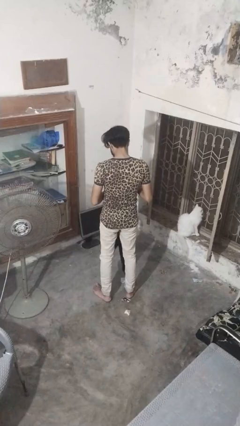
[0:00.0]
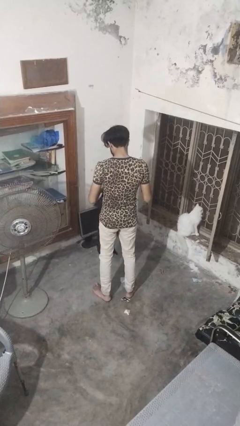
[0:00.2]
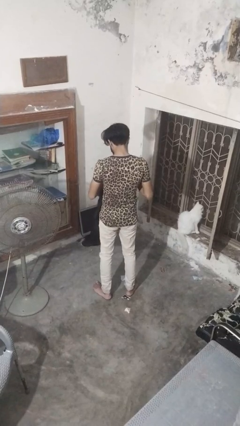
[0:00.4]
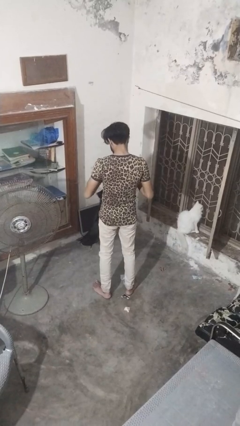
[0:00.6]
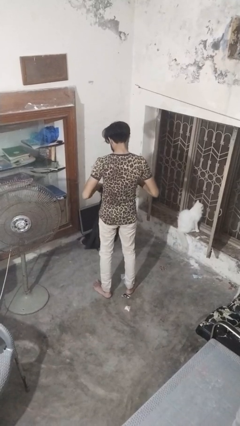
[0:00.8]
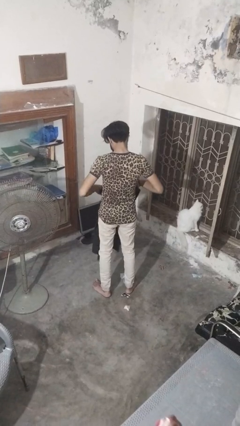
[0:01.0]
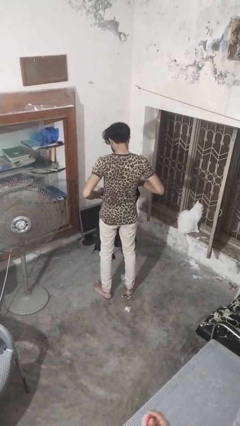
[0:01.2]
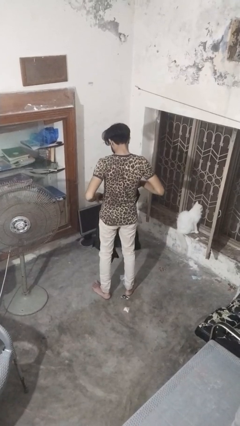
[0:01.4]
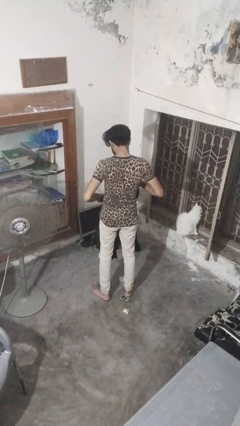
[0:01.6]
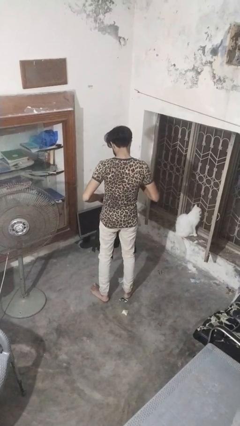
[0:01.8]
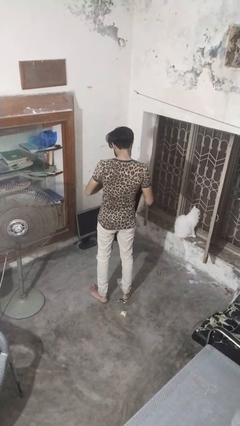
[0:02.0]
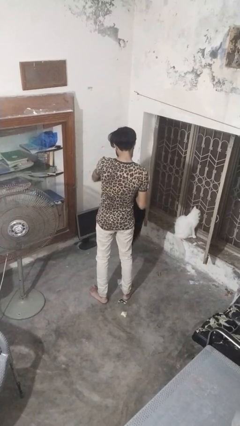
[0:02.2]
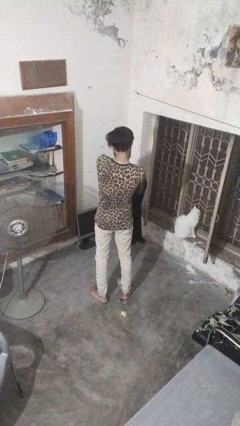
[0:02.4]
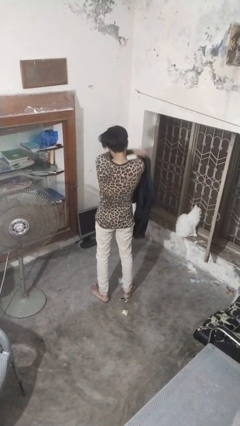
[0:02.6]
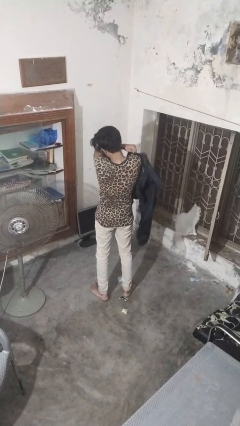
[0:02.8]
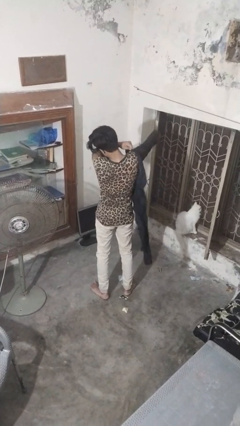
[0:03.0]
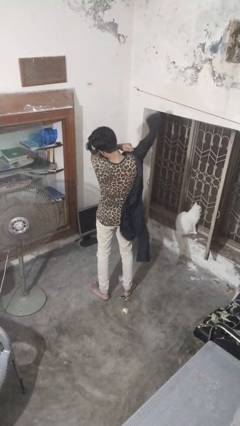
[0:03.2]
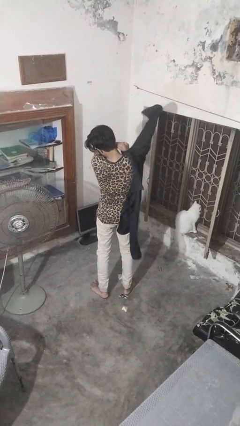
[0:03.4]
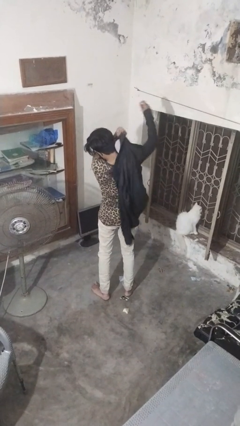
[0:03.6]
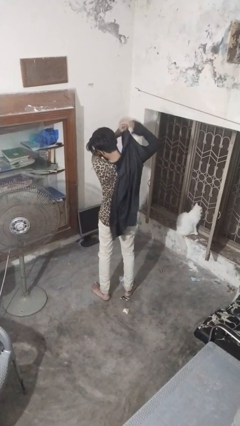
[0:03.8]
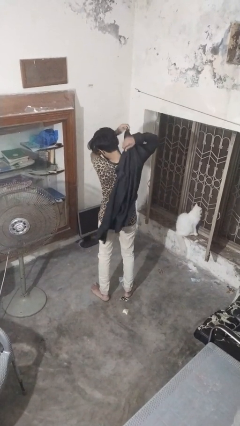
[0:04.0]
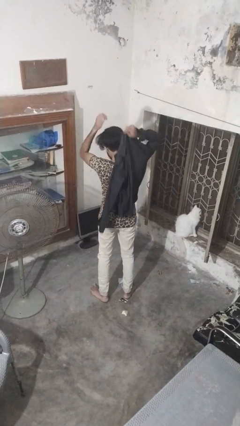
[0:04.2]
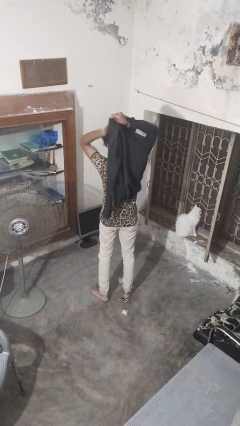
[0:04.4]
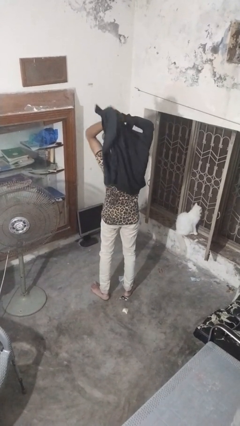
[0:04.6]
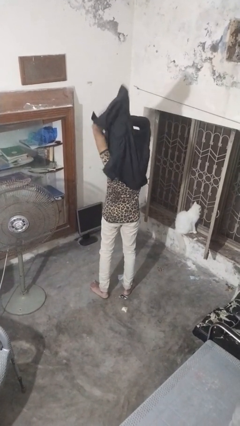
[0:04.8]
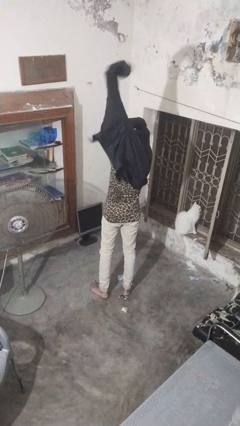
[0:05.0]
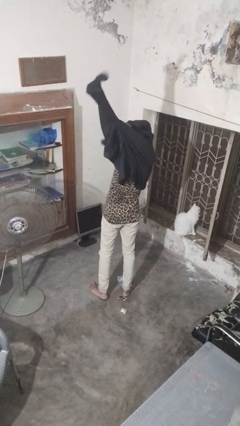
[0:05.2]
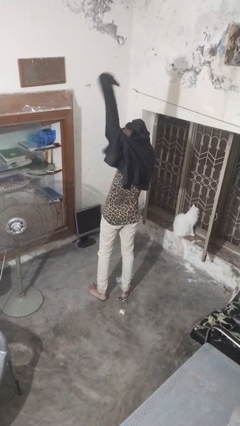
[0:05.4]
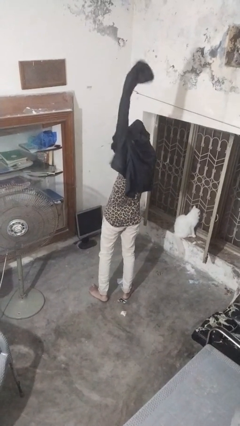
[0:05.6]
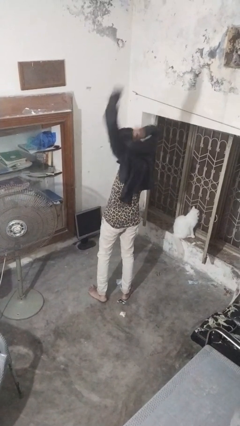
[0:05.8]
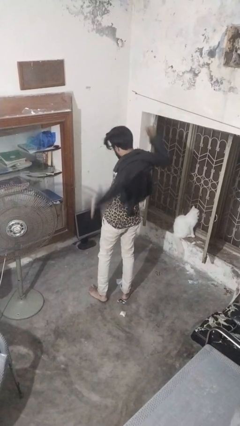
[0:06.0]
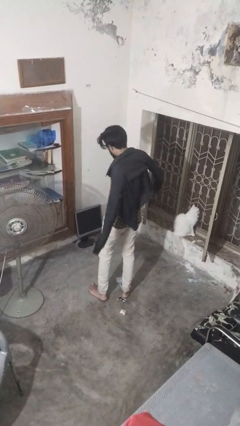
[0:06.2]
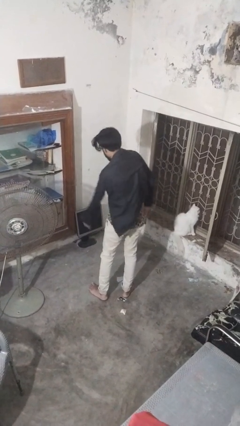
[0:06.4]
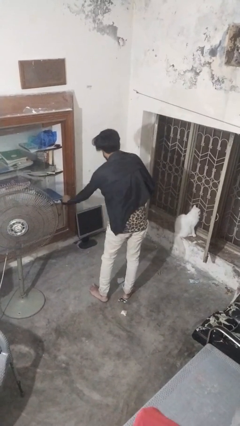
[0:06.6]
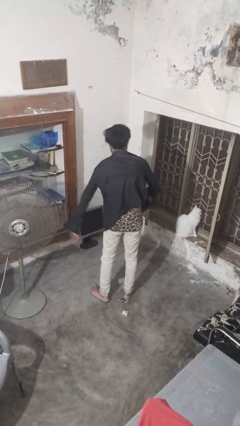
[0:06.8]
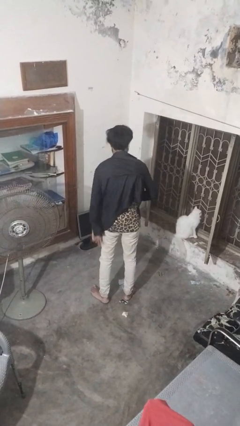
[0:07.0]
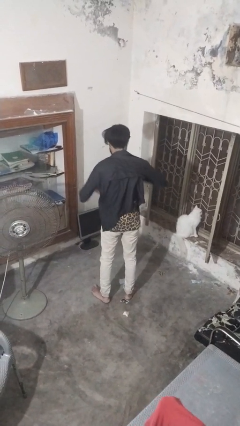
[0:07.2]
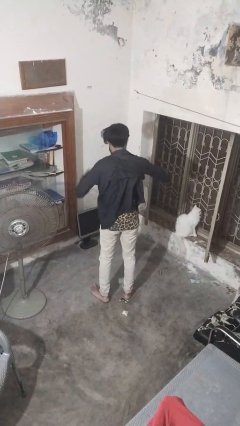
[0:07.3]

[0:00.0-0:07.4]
person puts on shirt

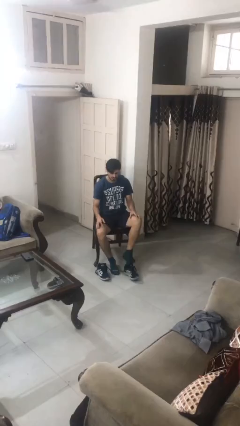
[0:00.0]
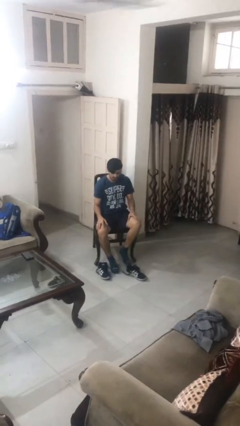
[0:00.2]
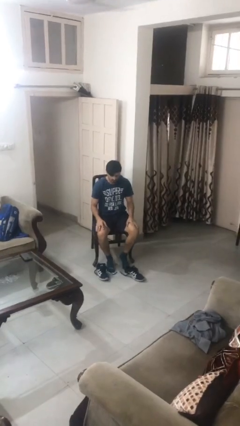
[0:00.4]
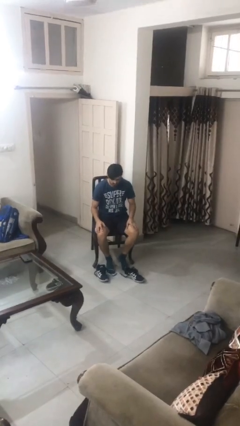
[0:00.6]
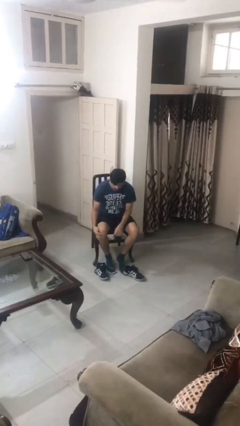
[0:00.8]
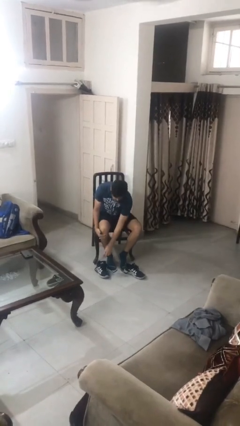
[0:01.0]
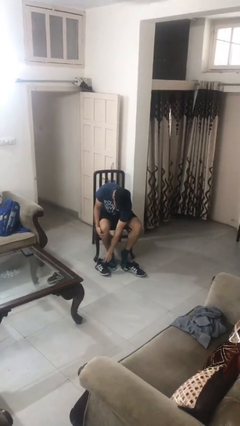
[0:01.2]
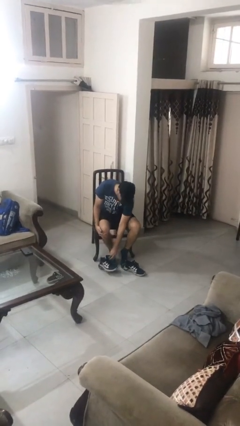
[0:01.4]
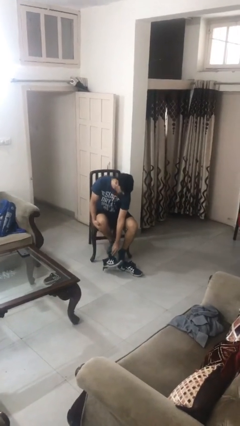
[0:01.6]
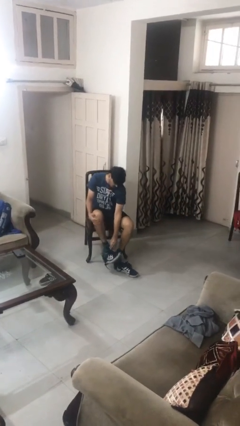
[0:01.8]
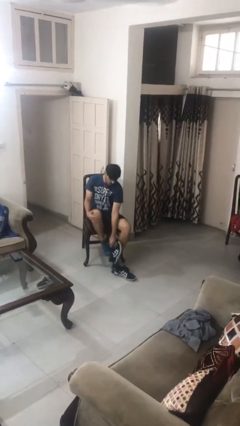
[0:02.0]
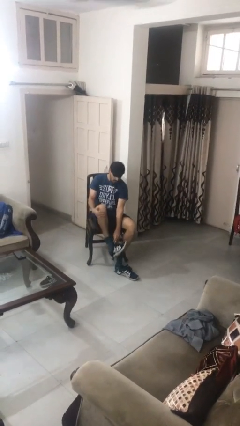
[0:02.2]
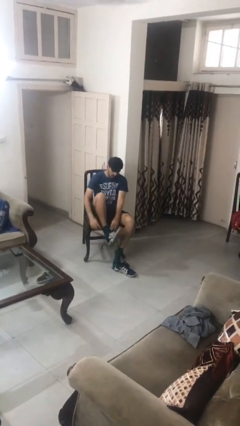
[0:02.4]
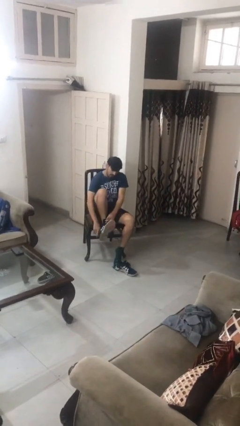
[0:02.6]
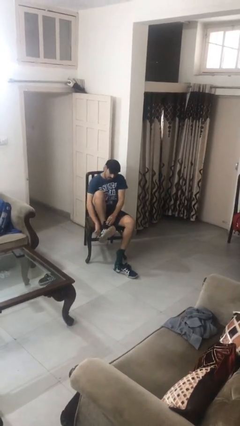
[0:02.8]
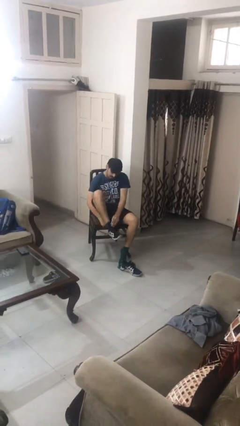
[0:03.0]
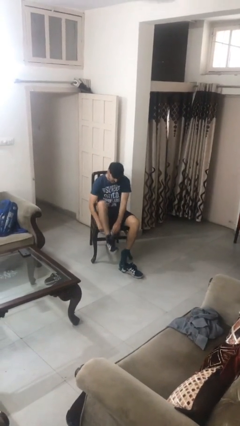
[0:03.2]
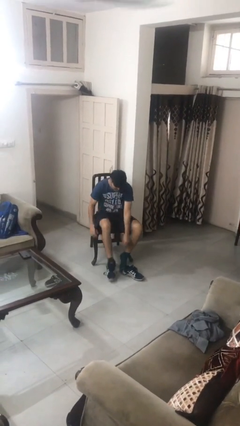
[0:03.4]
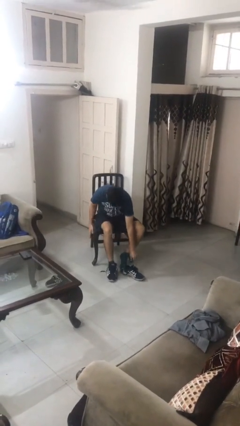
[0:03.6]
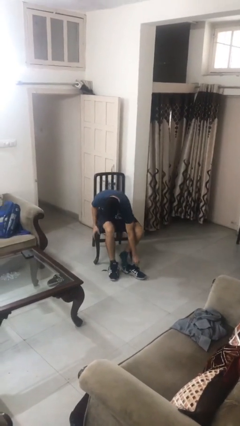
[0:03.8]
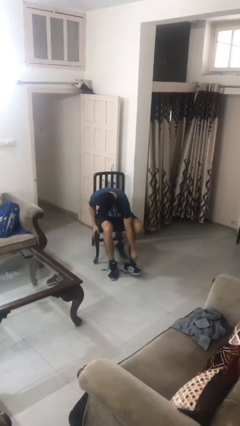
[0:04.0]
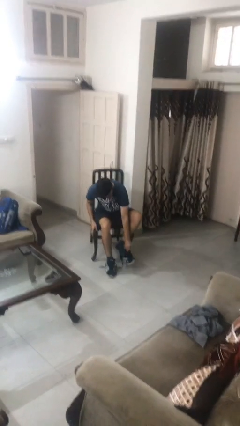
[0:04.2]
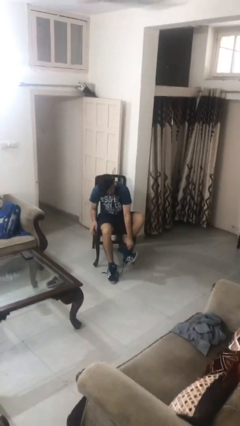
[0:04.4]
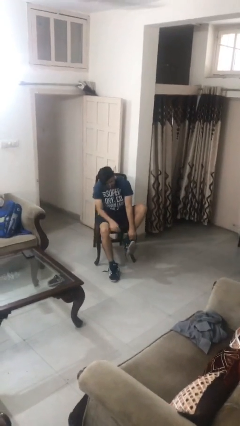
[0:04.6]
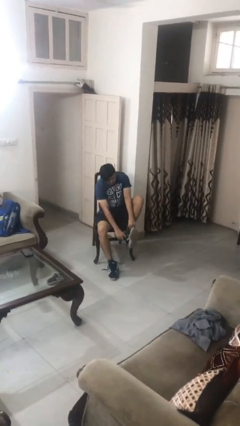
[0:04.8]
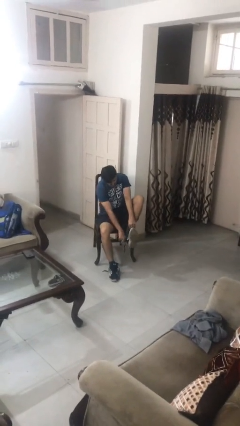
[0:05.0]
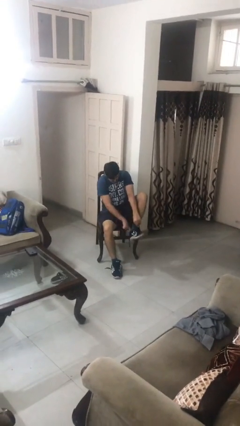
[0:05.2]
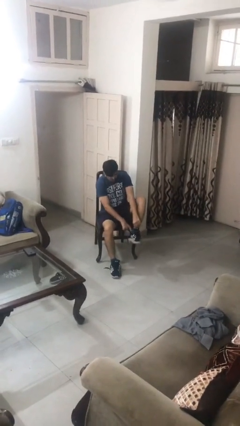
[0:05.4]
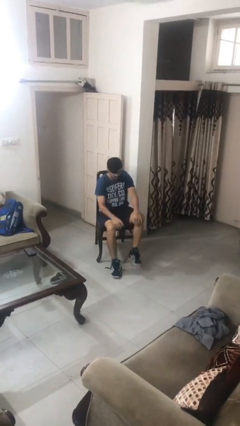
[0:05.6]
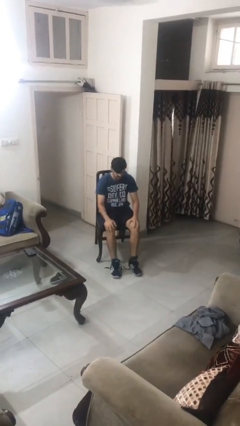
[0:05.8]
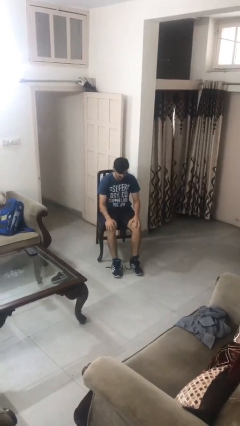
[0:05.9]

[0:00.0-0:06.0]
person puts on shoes

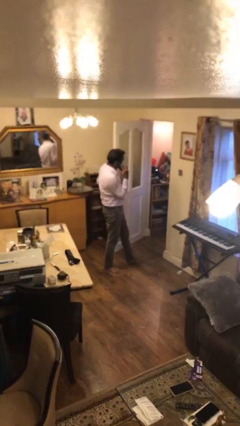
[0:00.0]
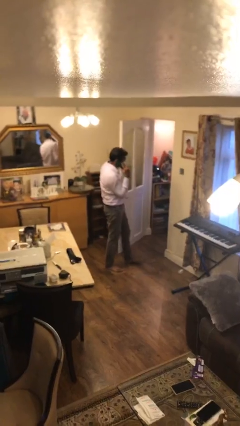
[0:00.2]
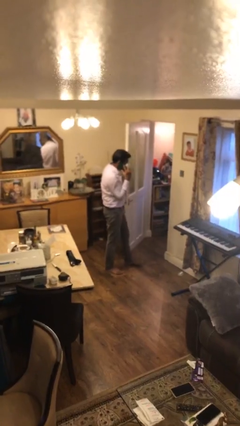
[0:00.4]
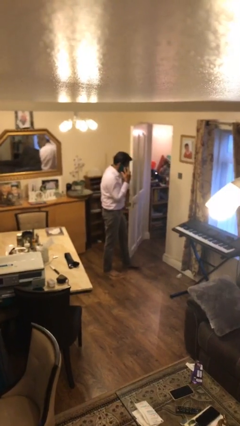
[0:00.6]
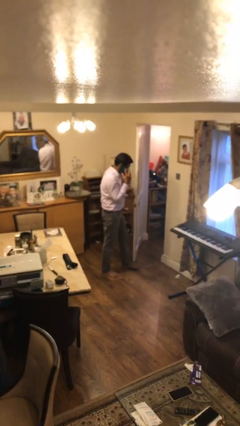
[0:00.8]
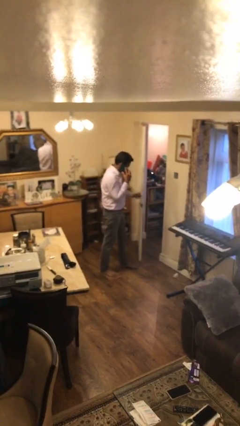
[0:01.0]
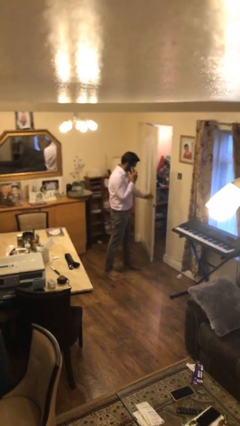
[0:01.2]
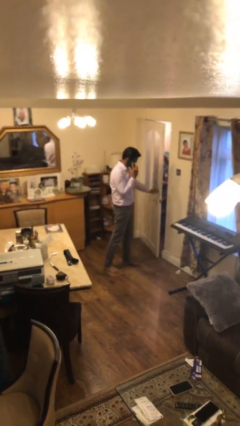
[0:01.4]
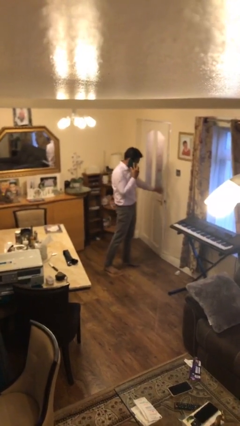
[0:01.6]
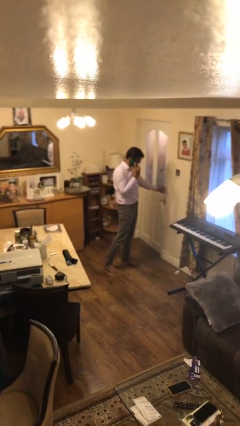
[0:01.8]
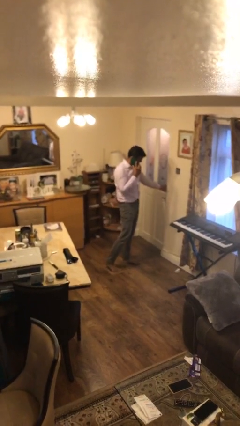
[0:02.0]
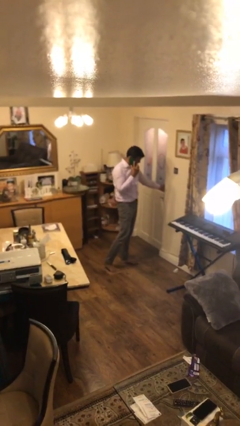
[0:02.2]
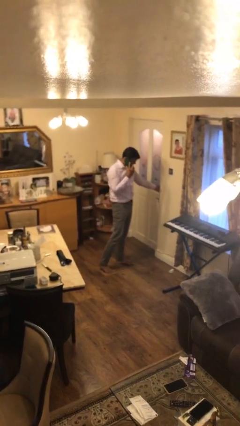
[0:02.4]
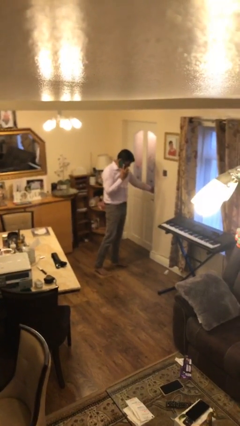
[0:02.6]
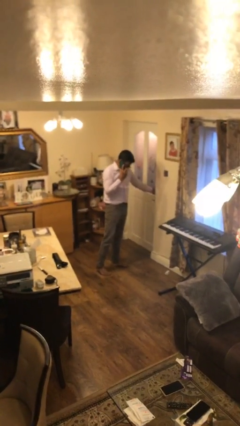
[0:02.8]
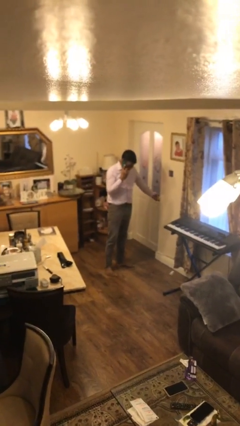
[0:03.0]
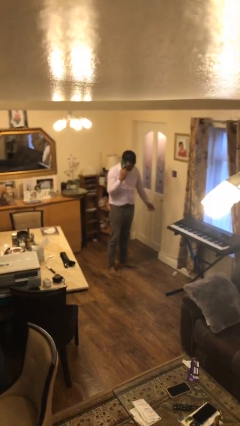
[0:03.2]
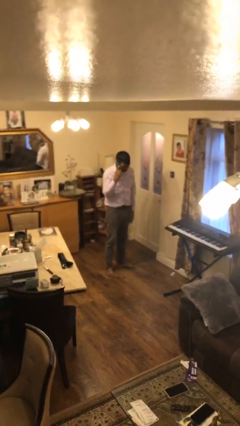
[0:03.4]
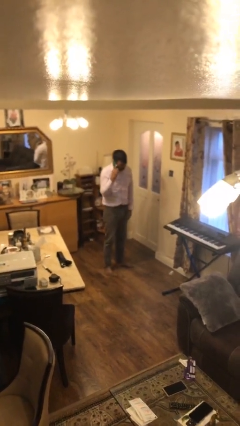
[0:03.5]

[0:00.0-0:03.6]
person closes facility door

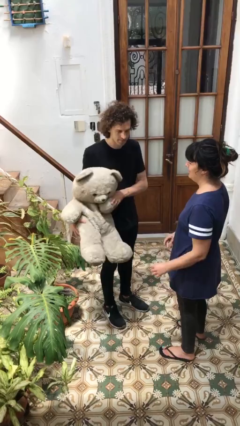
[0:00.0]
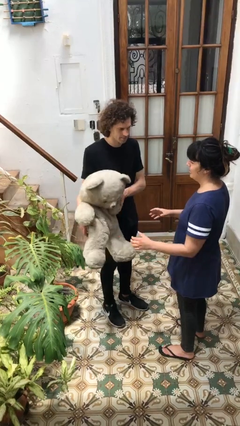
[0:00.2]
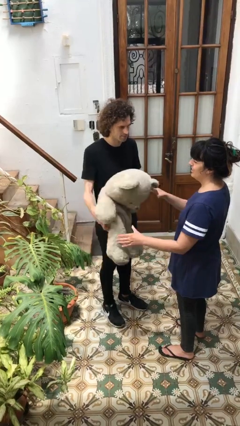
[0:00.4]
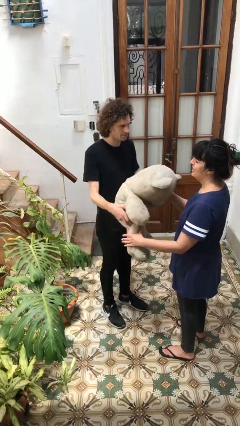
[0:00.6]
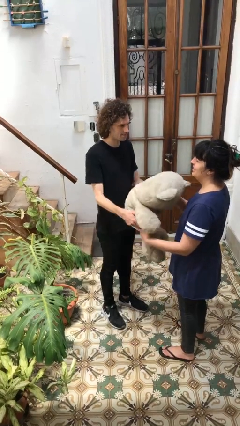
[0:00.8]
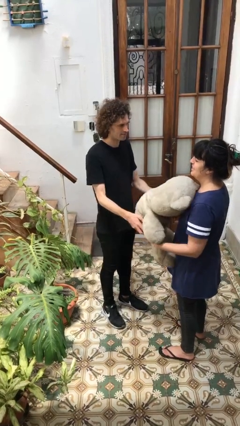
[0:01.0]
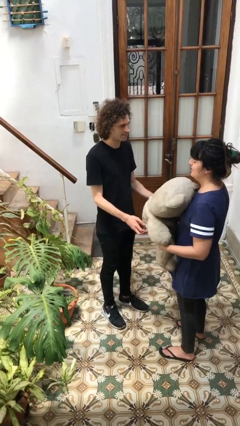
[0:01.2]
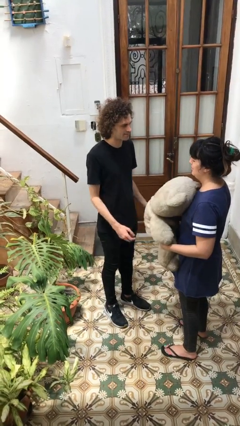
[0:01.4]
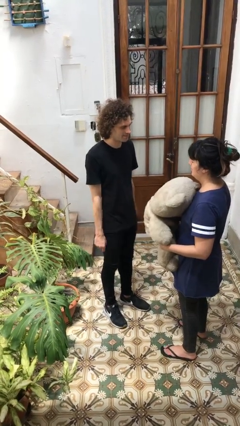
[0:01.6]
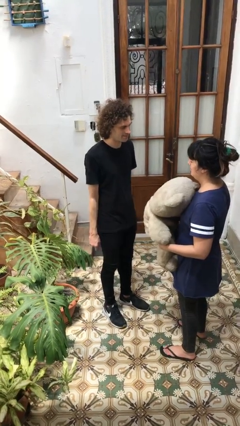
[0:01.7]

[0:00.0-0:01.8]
person transfers object to person
